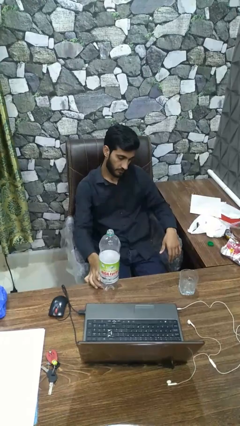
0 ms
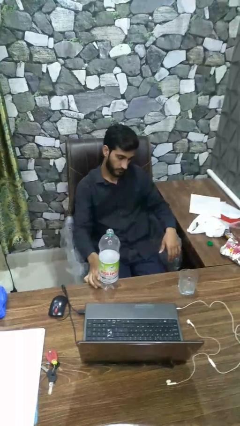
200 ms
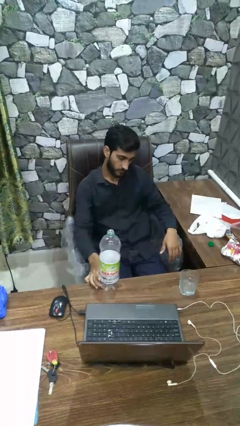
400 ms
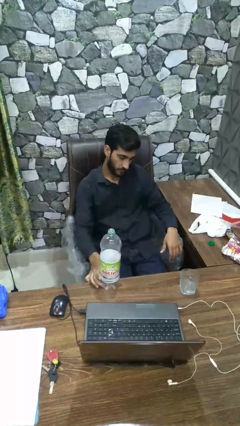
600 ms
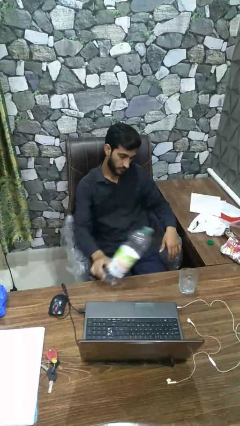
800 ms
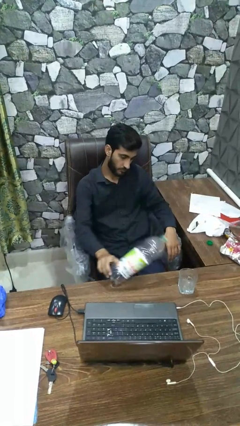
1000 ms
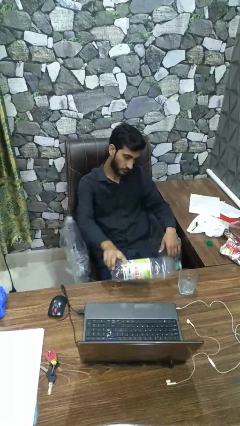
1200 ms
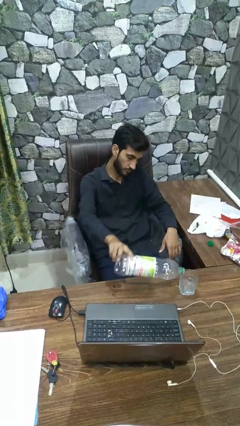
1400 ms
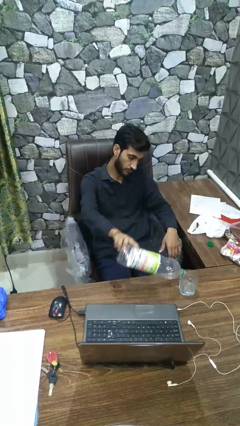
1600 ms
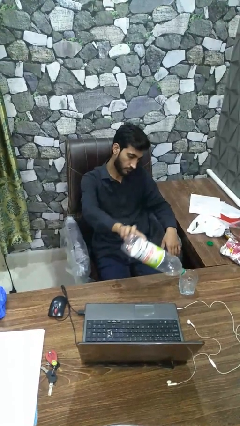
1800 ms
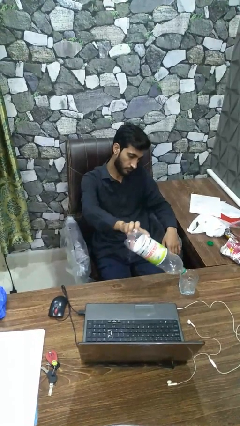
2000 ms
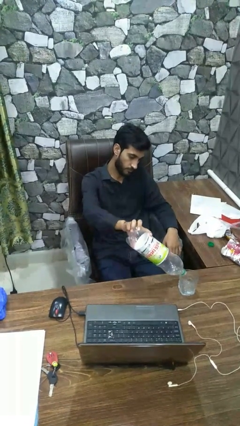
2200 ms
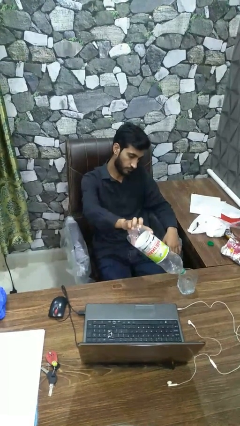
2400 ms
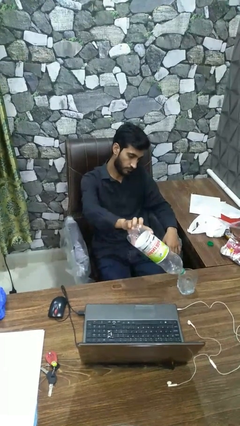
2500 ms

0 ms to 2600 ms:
person pours liquid into cup

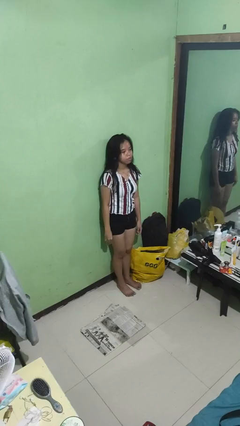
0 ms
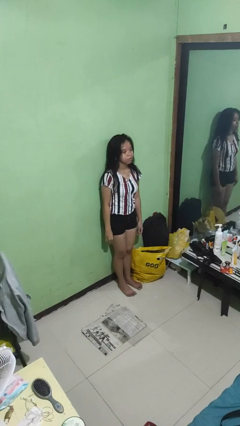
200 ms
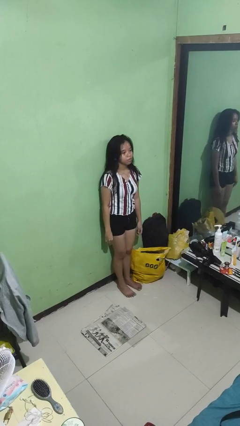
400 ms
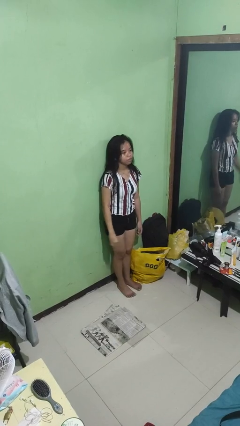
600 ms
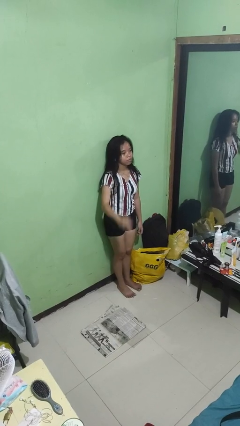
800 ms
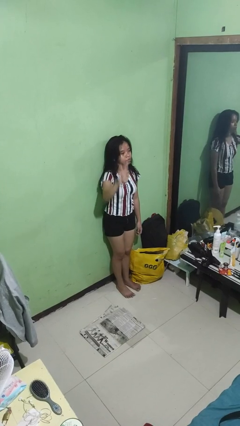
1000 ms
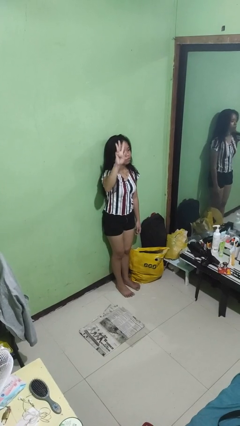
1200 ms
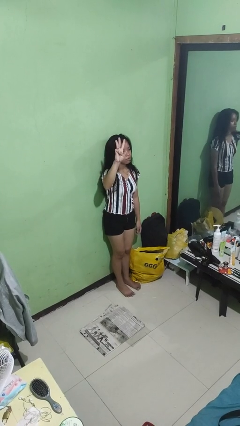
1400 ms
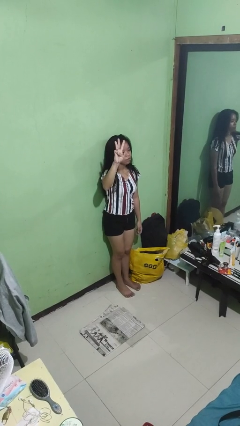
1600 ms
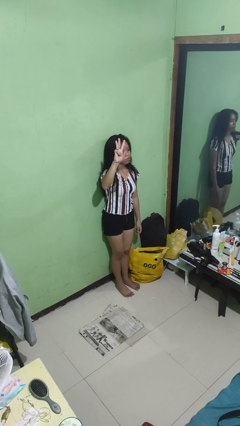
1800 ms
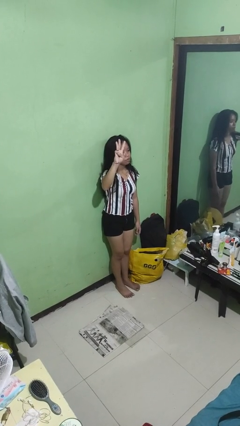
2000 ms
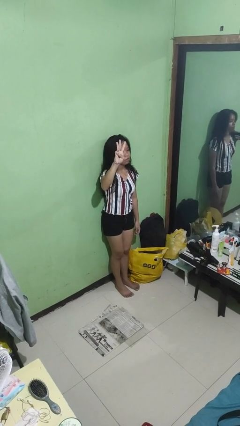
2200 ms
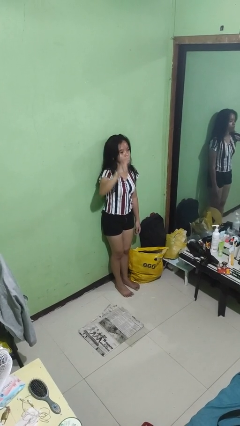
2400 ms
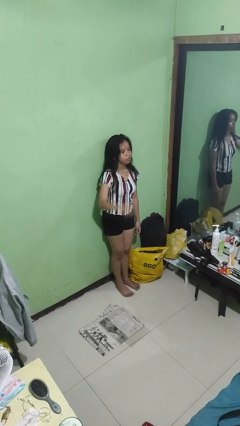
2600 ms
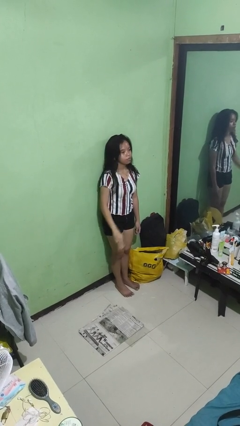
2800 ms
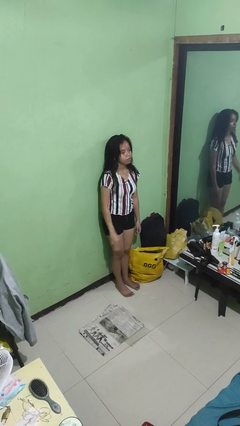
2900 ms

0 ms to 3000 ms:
person gestures number three

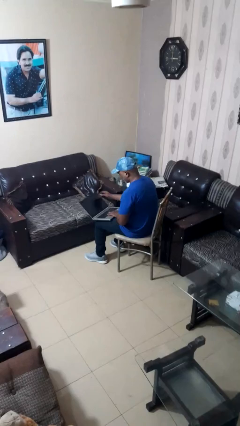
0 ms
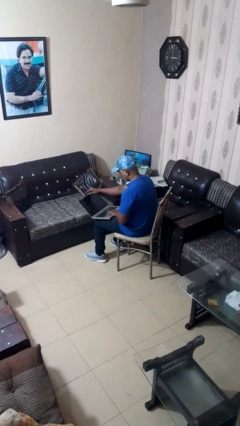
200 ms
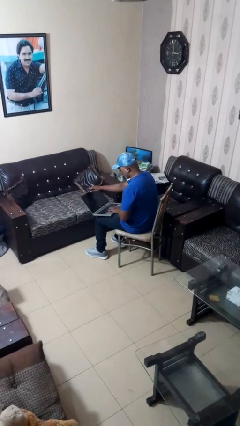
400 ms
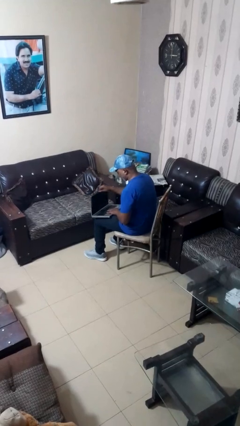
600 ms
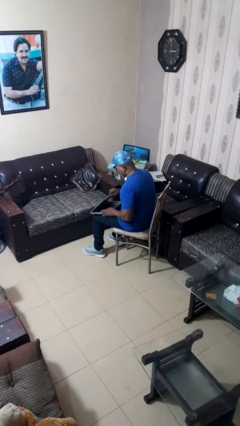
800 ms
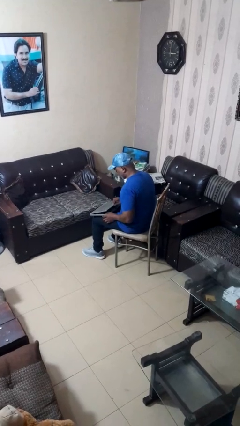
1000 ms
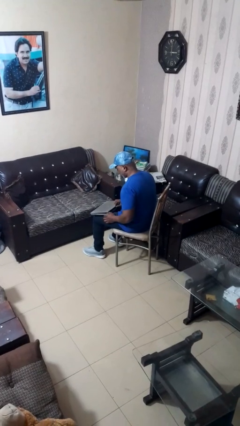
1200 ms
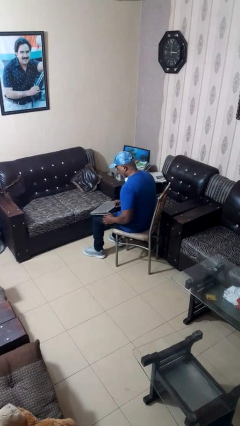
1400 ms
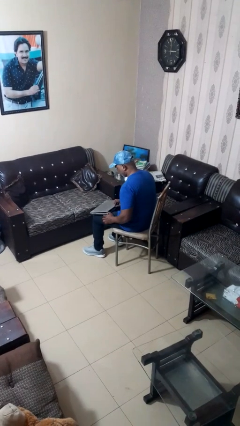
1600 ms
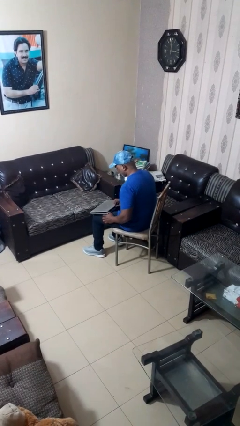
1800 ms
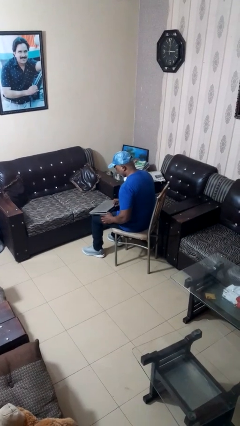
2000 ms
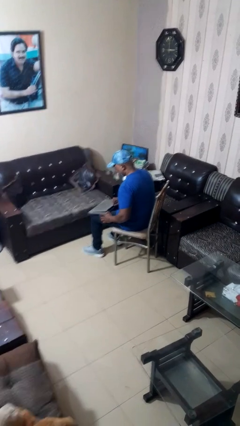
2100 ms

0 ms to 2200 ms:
person closes laptop

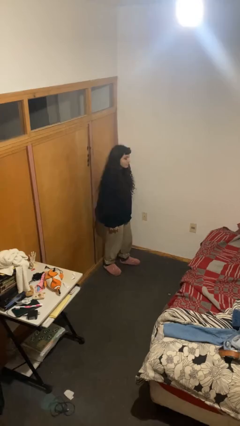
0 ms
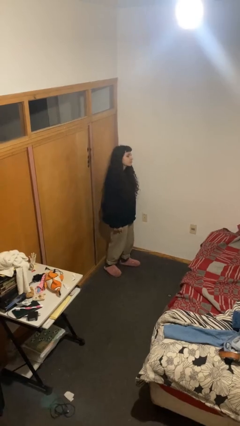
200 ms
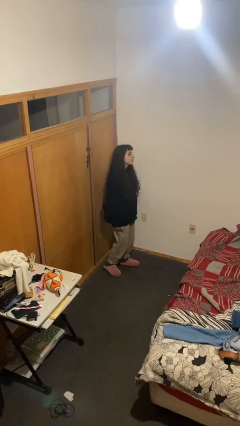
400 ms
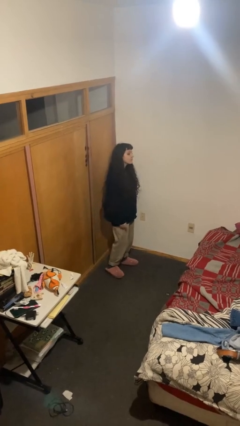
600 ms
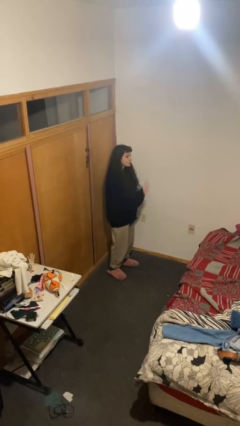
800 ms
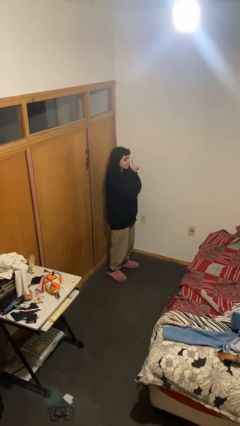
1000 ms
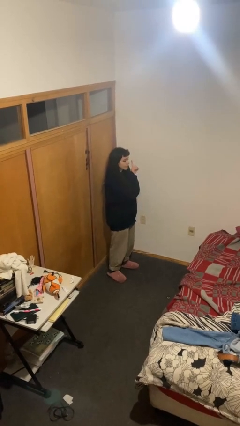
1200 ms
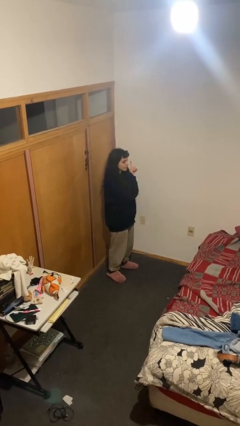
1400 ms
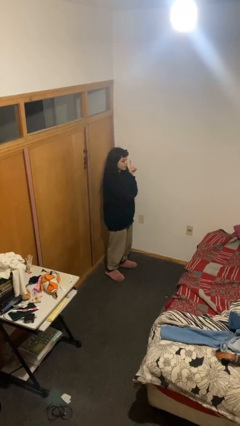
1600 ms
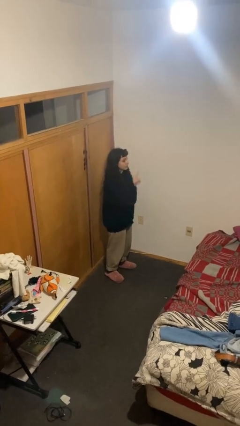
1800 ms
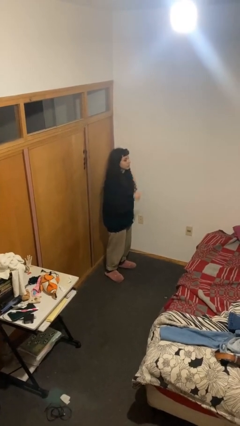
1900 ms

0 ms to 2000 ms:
person gestures number one

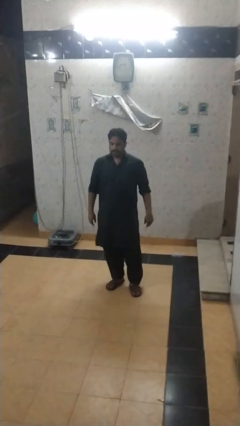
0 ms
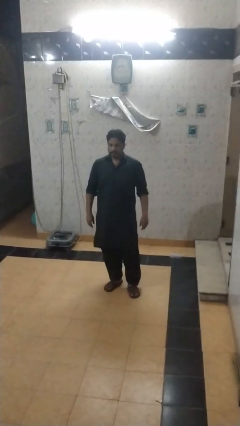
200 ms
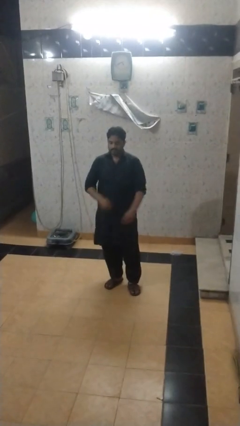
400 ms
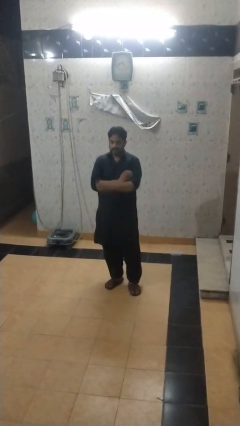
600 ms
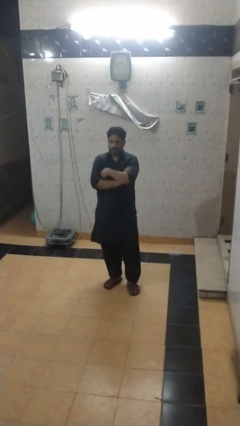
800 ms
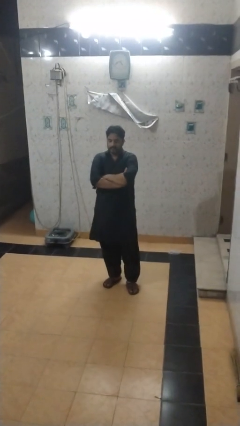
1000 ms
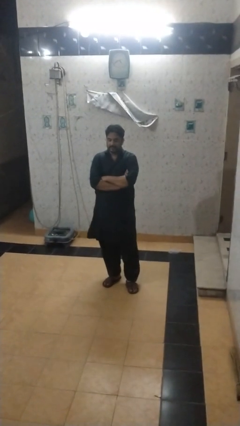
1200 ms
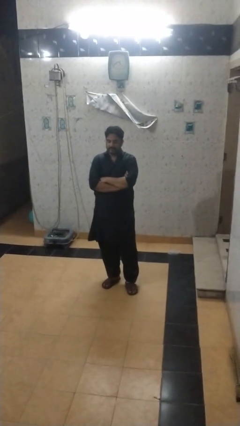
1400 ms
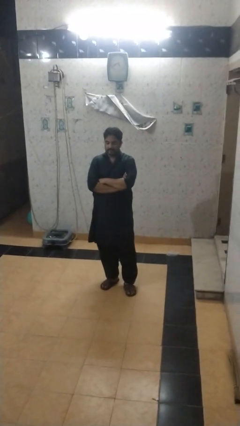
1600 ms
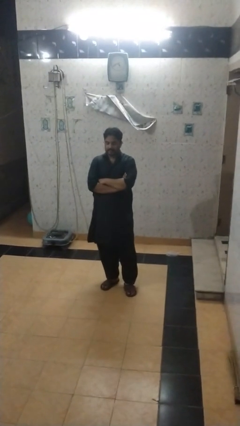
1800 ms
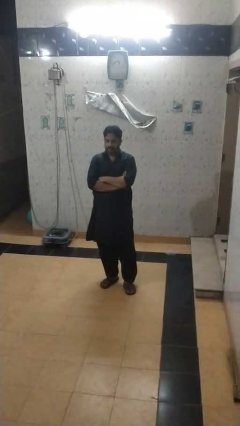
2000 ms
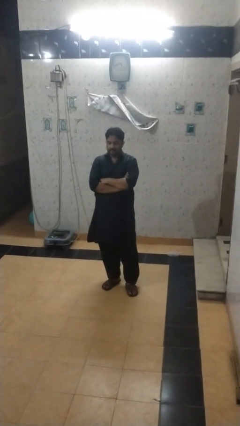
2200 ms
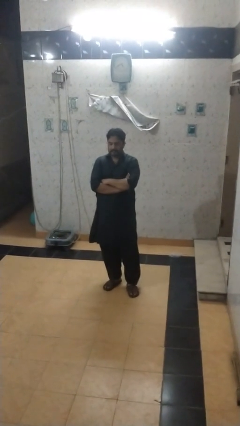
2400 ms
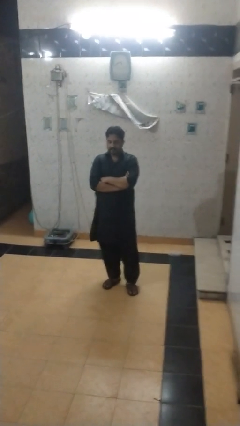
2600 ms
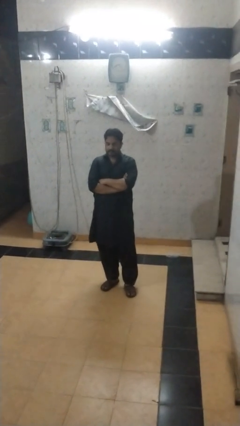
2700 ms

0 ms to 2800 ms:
person crosses arms

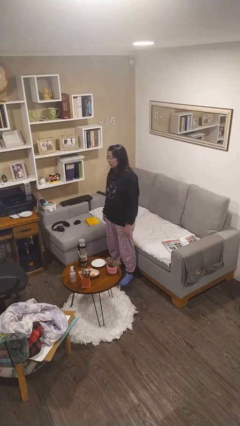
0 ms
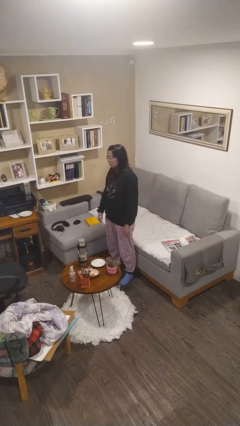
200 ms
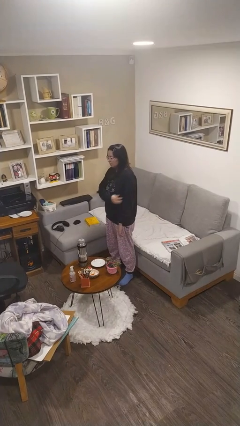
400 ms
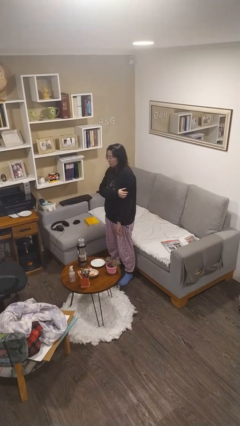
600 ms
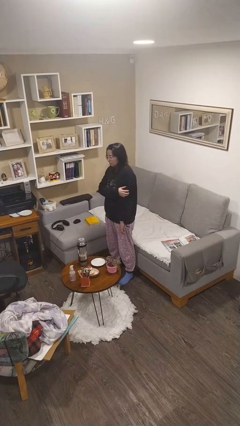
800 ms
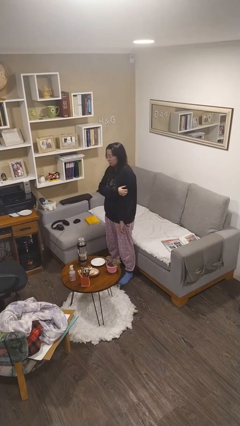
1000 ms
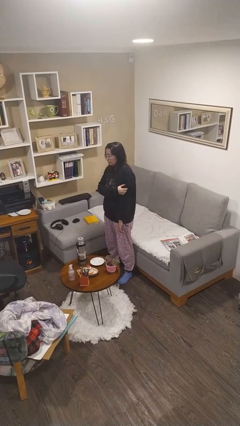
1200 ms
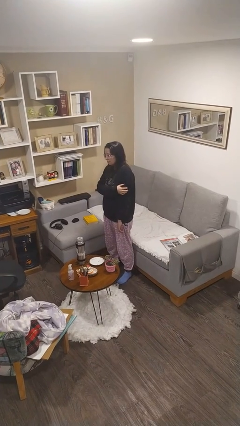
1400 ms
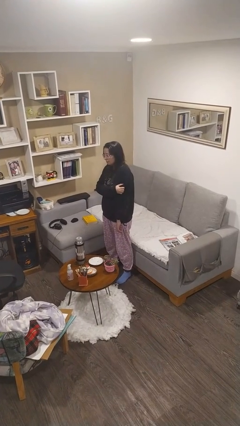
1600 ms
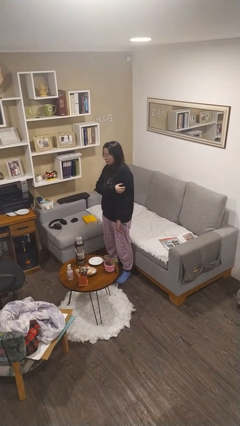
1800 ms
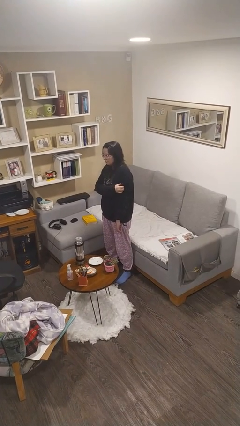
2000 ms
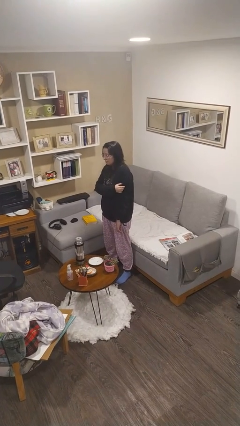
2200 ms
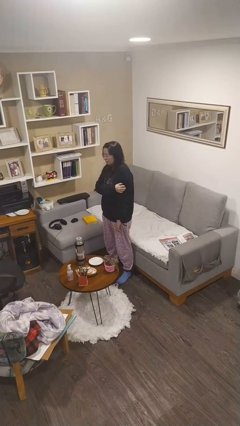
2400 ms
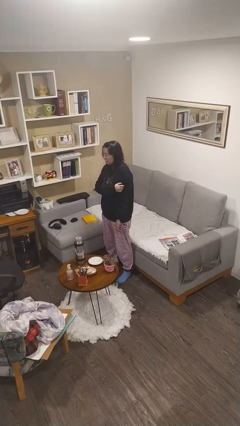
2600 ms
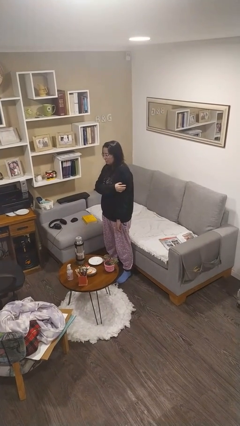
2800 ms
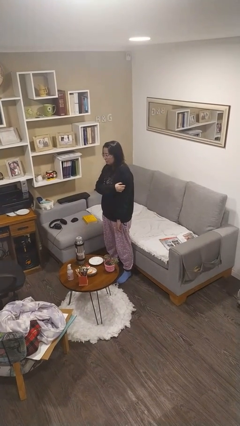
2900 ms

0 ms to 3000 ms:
person scratches face

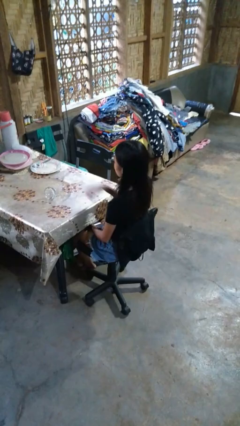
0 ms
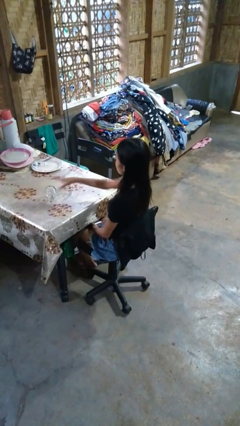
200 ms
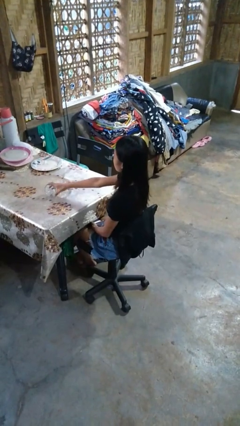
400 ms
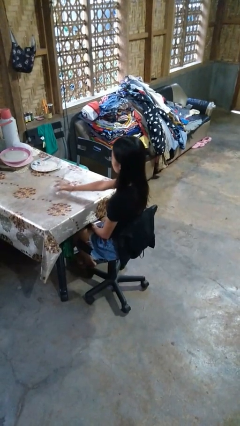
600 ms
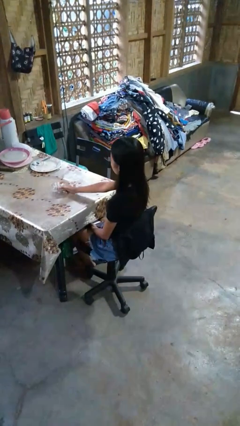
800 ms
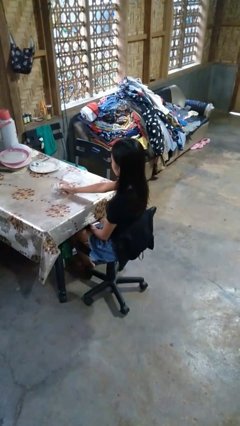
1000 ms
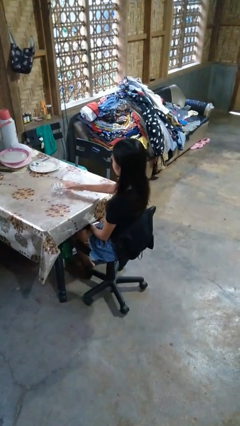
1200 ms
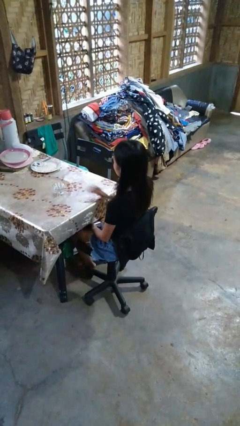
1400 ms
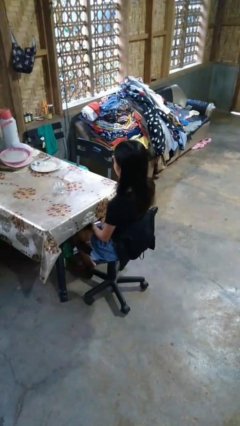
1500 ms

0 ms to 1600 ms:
person sets upright glass
